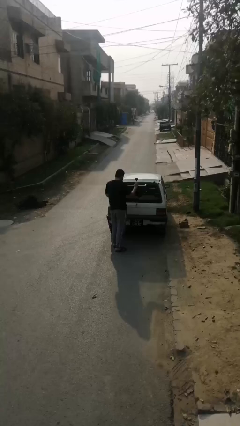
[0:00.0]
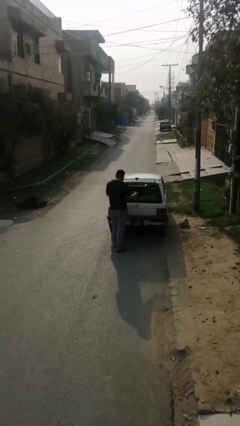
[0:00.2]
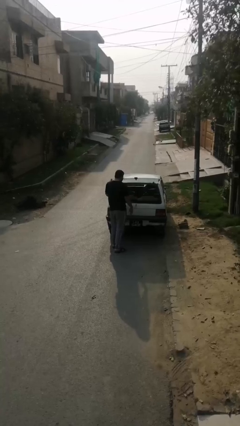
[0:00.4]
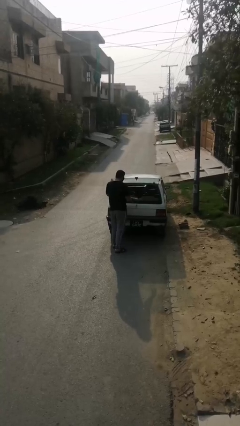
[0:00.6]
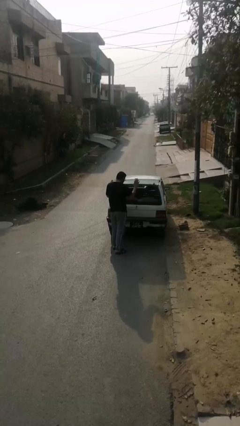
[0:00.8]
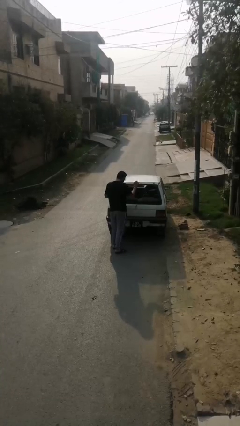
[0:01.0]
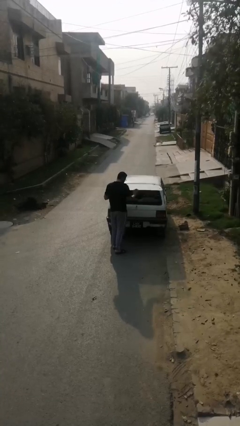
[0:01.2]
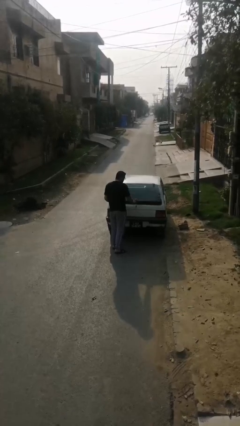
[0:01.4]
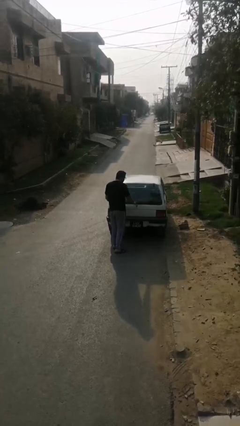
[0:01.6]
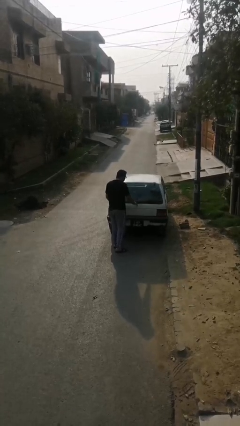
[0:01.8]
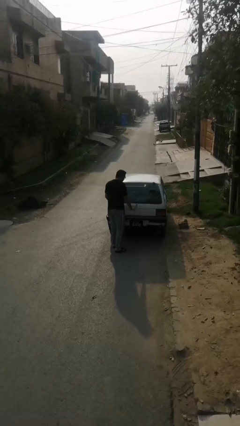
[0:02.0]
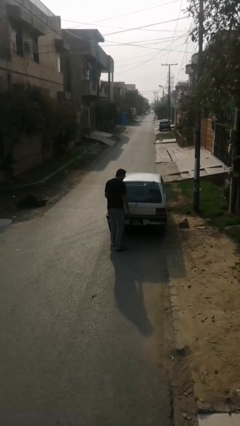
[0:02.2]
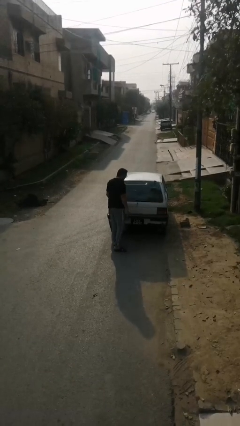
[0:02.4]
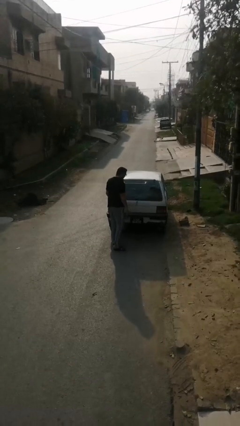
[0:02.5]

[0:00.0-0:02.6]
person closes car trunk

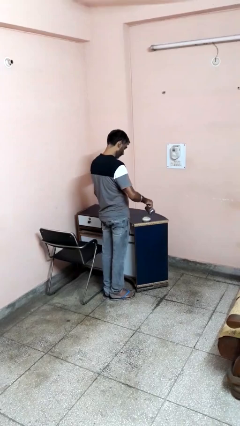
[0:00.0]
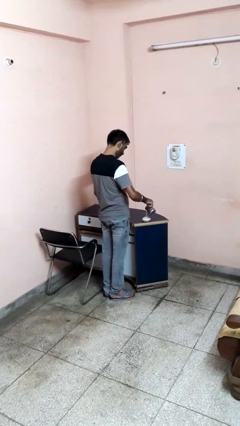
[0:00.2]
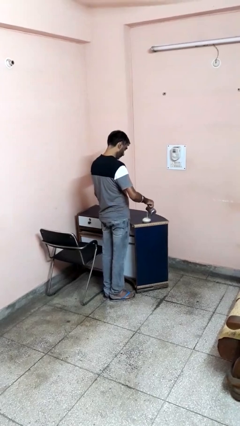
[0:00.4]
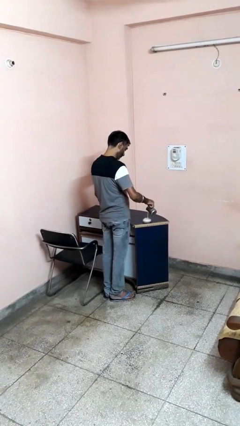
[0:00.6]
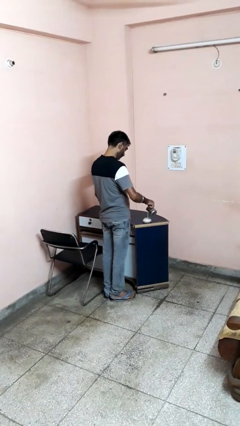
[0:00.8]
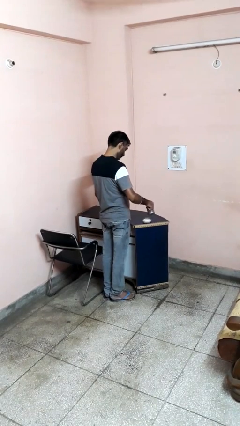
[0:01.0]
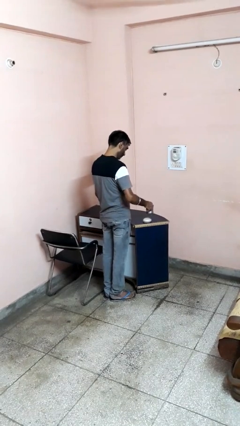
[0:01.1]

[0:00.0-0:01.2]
person pours into bowl

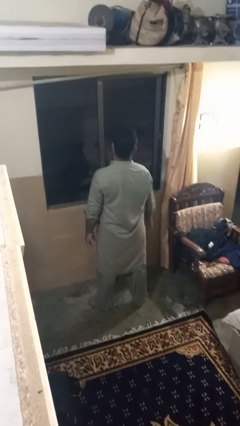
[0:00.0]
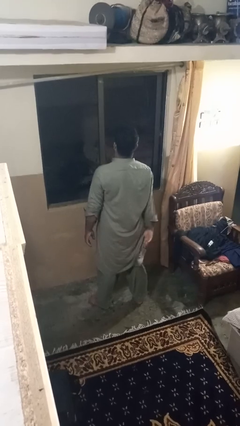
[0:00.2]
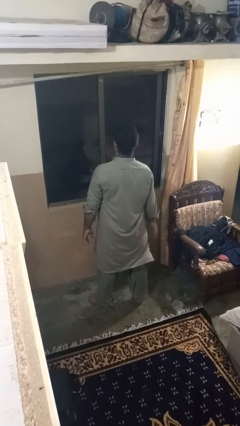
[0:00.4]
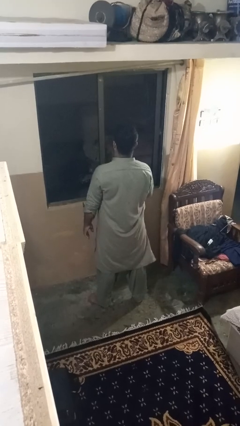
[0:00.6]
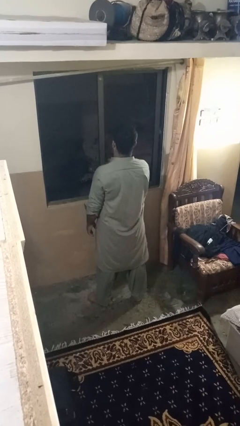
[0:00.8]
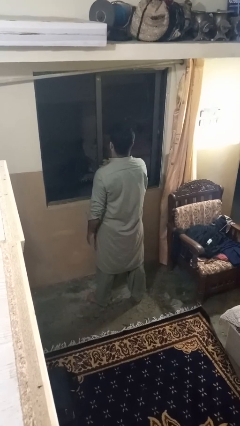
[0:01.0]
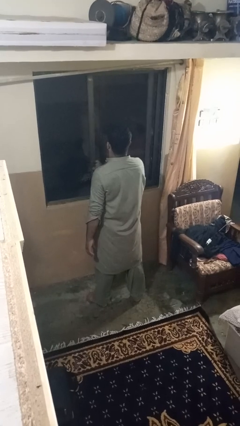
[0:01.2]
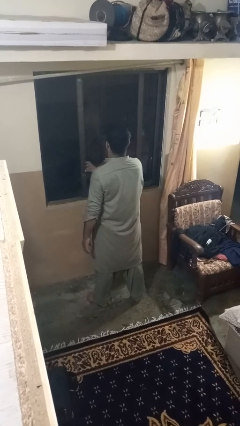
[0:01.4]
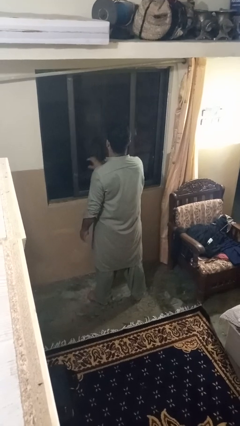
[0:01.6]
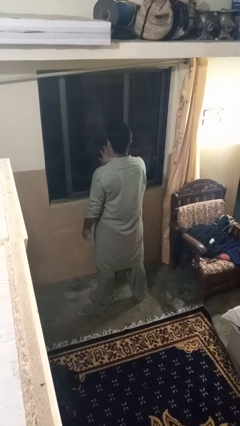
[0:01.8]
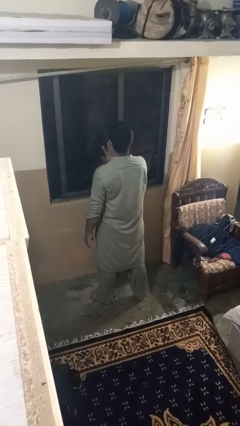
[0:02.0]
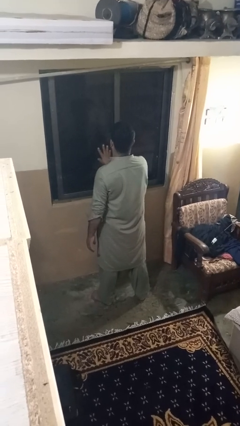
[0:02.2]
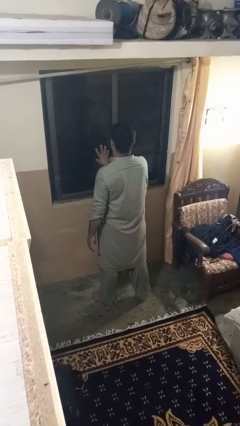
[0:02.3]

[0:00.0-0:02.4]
person closes home window

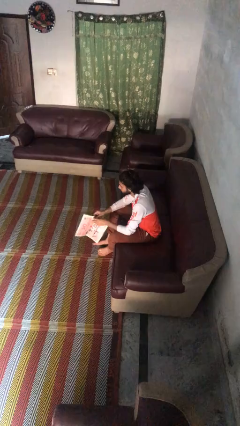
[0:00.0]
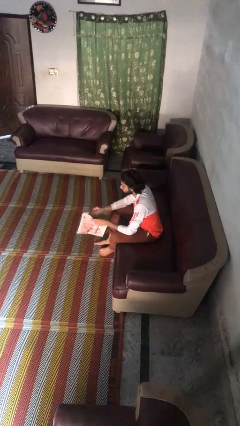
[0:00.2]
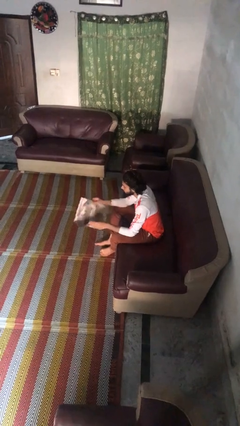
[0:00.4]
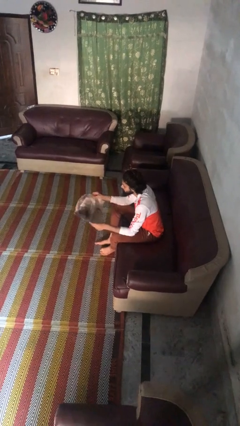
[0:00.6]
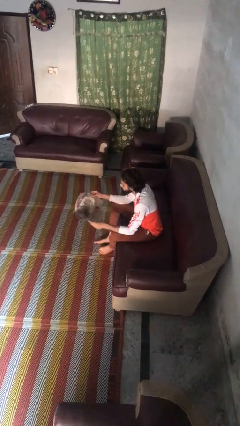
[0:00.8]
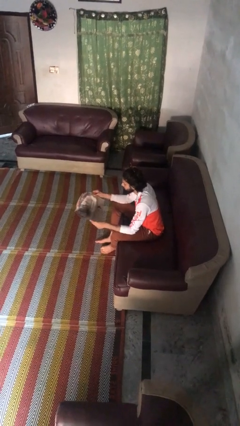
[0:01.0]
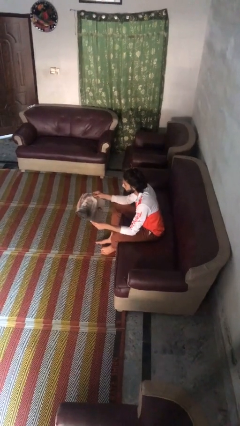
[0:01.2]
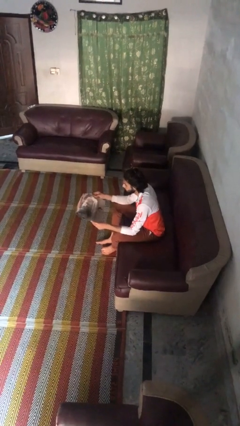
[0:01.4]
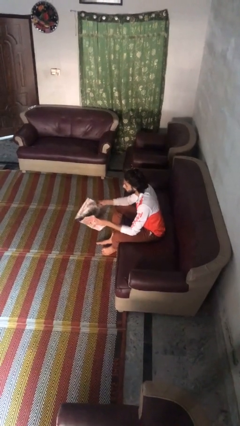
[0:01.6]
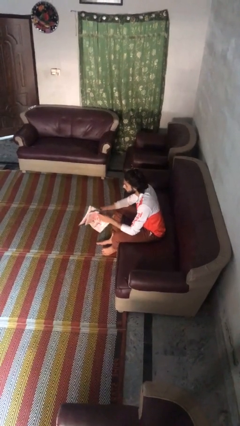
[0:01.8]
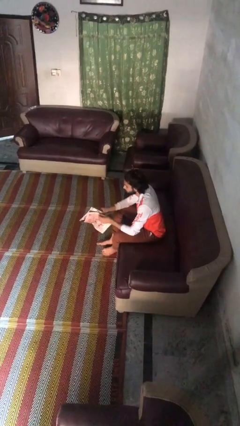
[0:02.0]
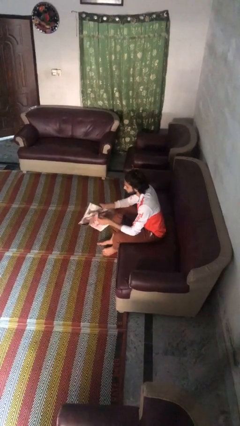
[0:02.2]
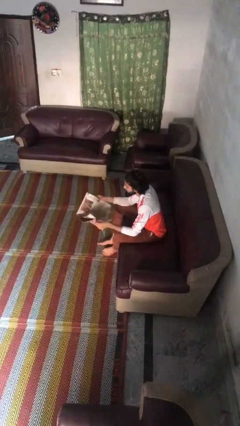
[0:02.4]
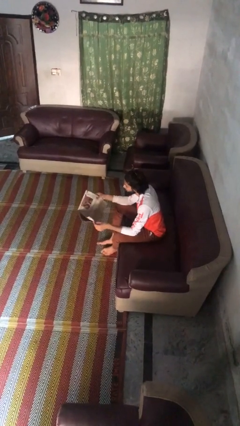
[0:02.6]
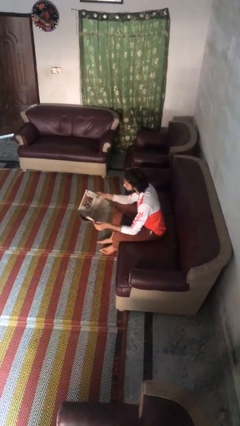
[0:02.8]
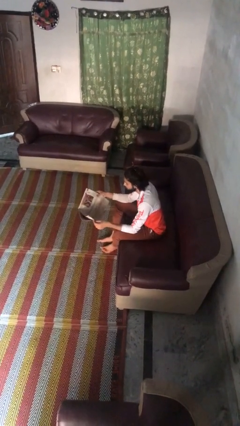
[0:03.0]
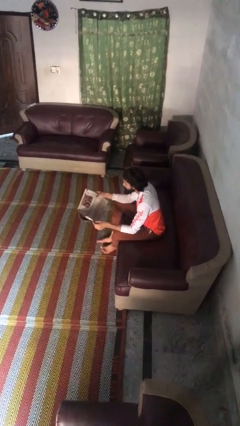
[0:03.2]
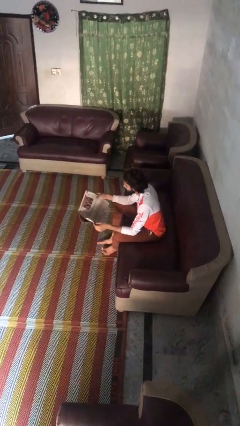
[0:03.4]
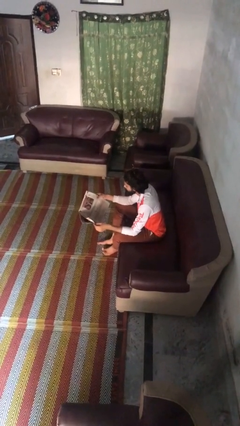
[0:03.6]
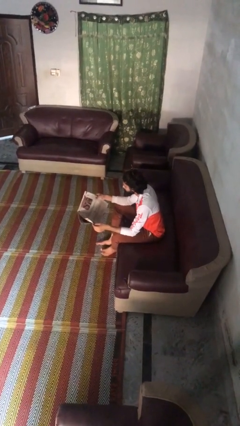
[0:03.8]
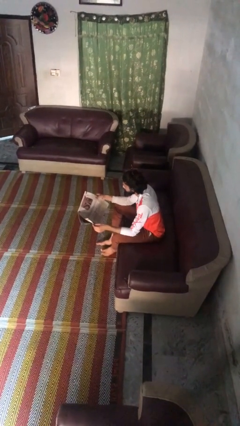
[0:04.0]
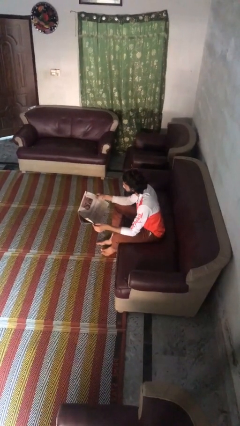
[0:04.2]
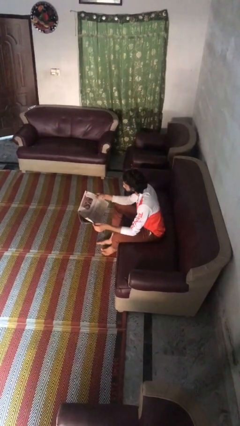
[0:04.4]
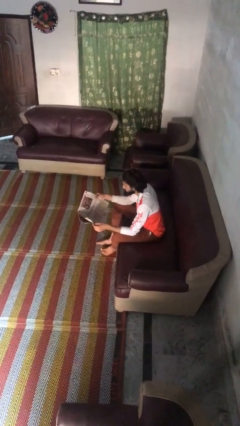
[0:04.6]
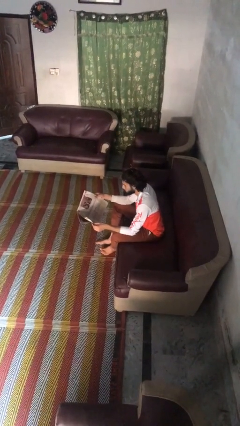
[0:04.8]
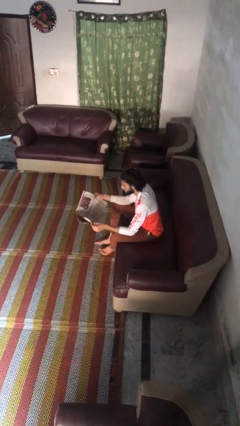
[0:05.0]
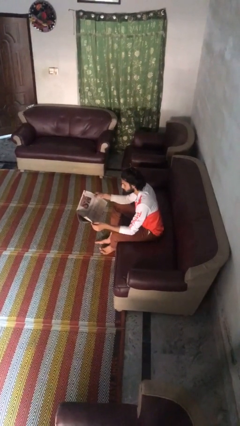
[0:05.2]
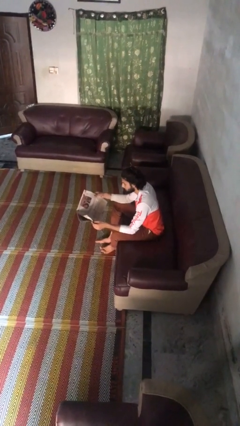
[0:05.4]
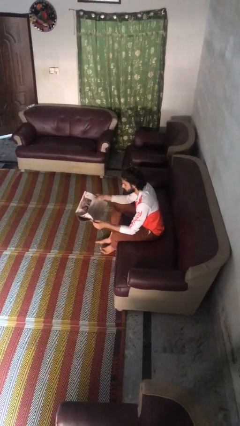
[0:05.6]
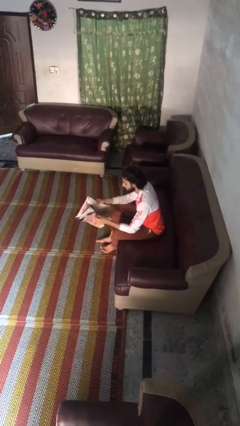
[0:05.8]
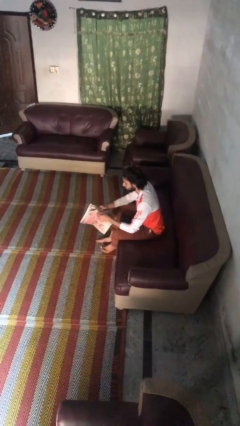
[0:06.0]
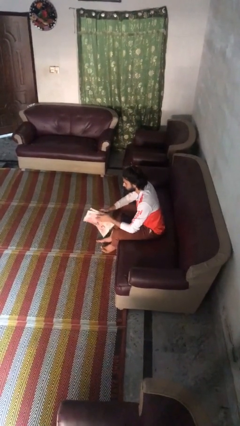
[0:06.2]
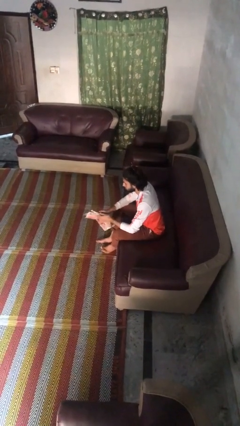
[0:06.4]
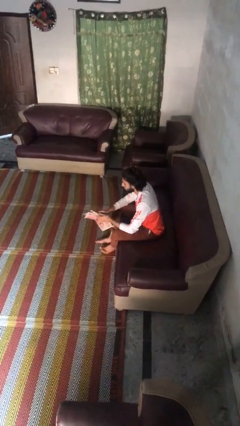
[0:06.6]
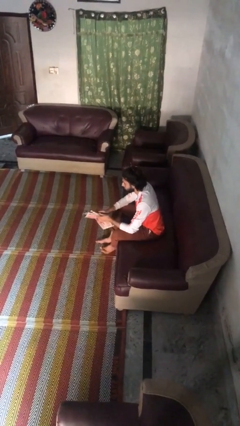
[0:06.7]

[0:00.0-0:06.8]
person reads magazine

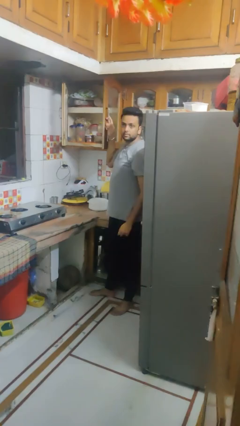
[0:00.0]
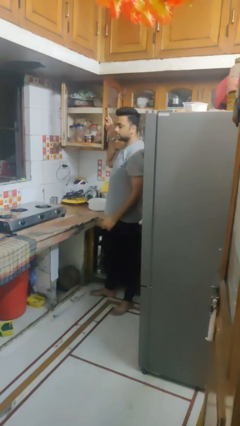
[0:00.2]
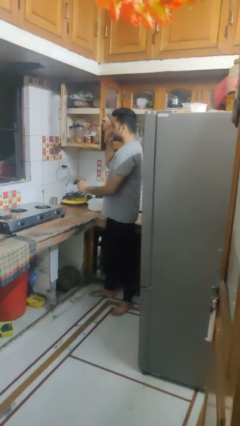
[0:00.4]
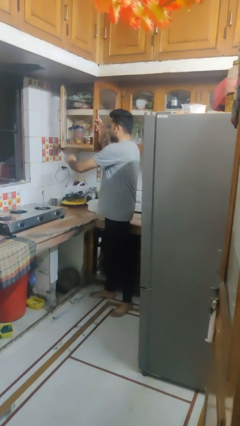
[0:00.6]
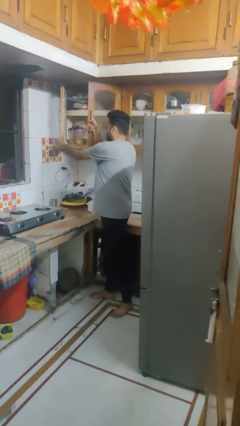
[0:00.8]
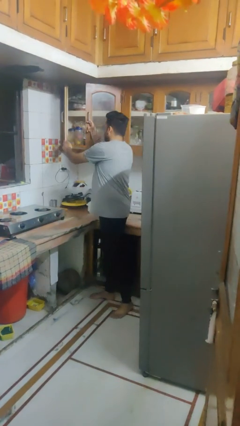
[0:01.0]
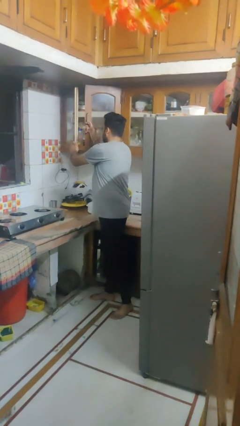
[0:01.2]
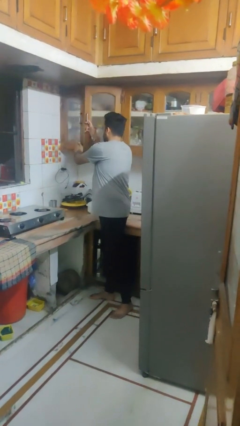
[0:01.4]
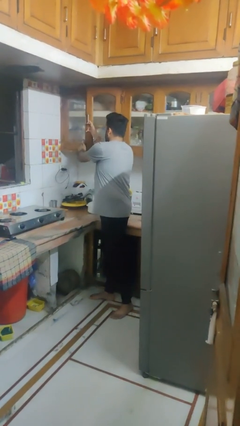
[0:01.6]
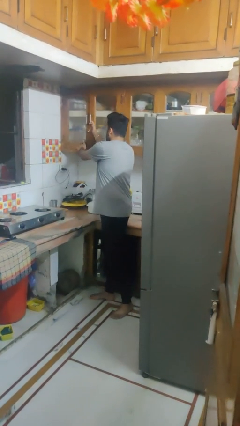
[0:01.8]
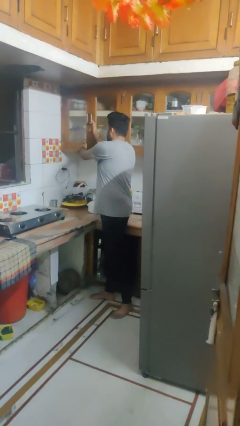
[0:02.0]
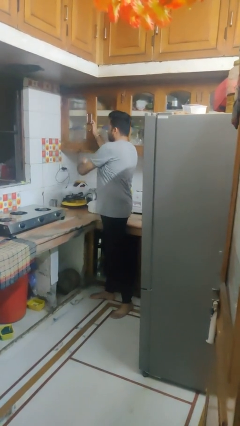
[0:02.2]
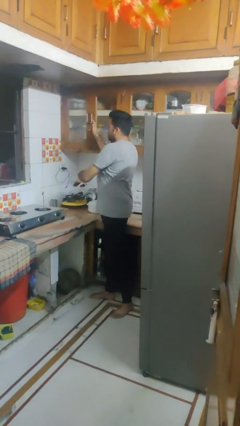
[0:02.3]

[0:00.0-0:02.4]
person closes cabinet

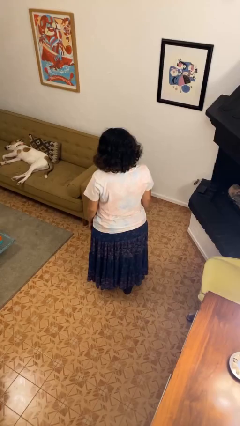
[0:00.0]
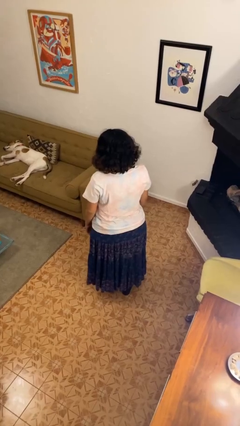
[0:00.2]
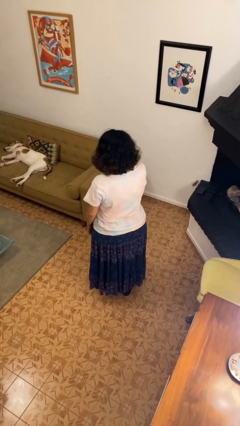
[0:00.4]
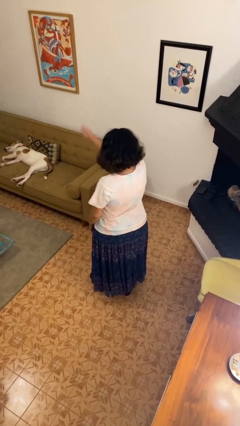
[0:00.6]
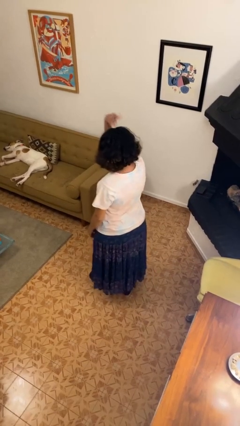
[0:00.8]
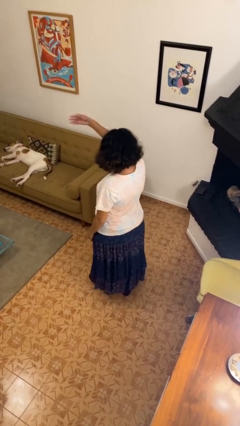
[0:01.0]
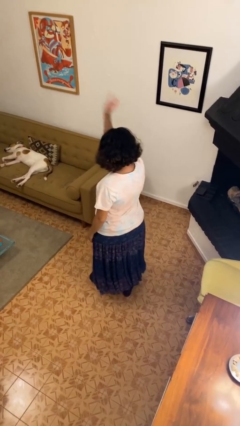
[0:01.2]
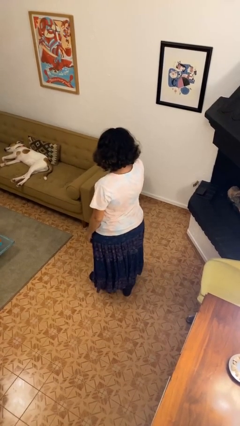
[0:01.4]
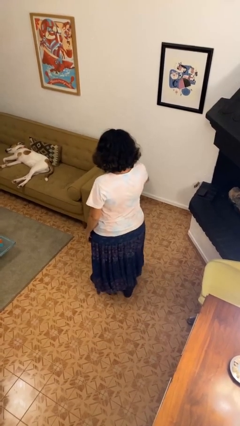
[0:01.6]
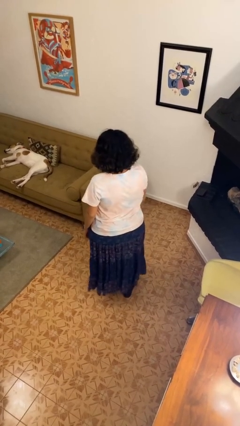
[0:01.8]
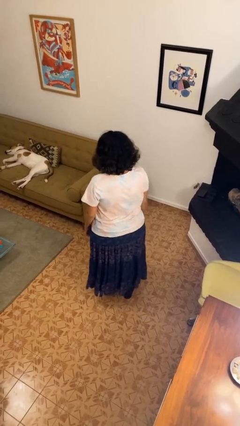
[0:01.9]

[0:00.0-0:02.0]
person gestures come here

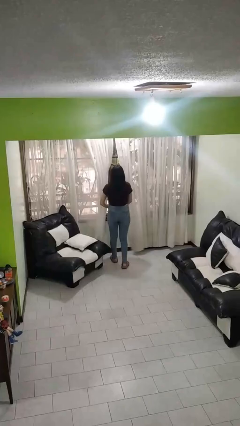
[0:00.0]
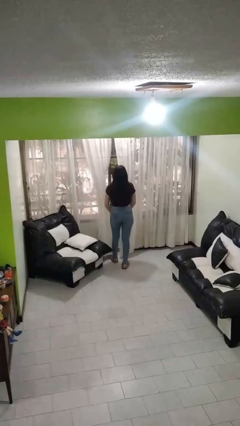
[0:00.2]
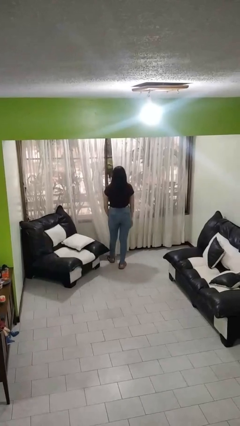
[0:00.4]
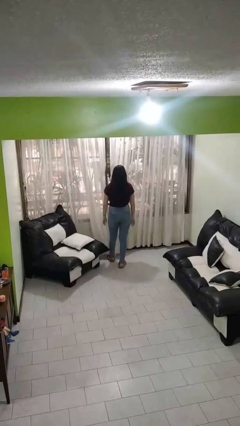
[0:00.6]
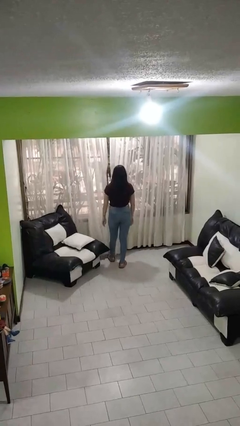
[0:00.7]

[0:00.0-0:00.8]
person closes curtains
